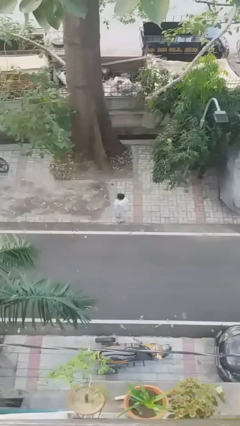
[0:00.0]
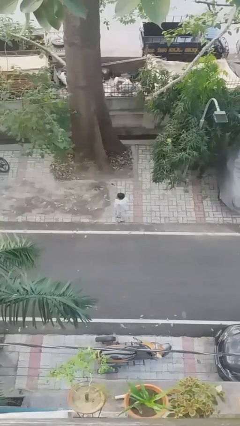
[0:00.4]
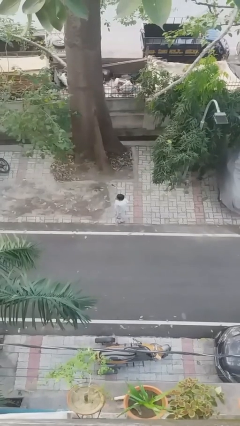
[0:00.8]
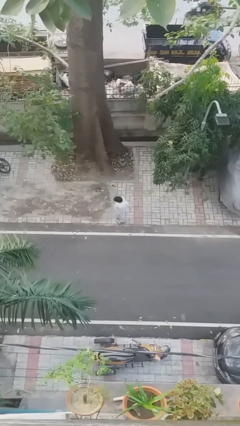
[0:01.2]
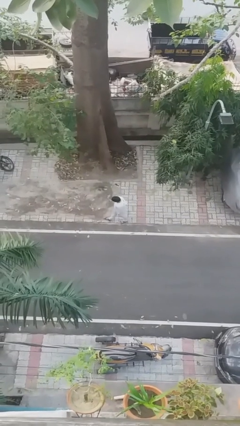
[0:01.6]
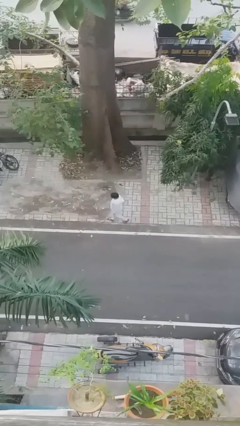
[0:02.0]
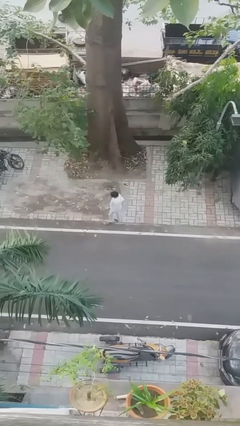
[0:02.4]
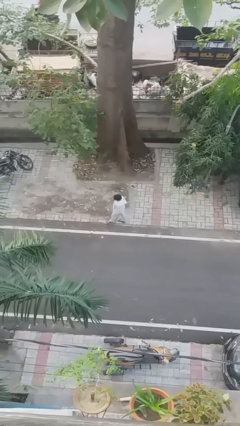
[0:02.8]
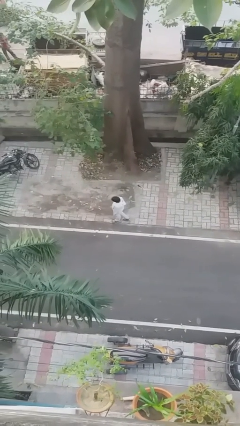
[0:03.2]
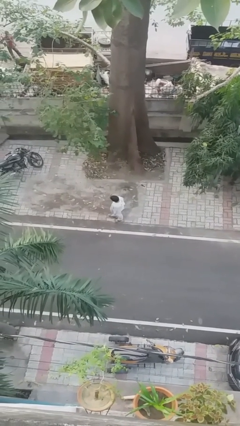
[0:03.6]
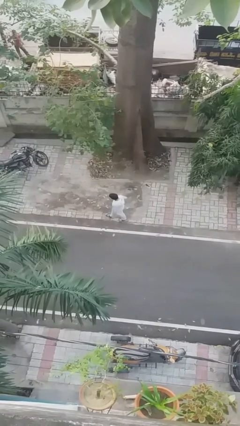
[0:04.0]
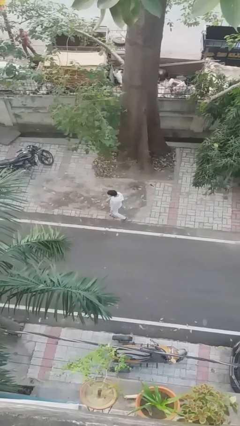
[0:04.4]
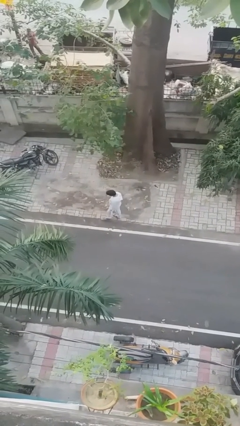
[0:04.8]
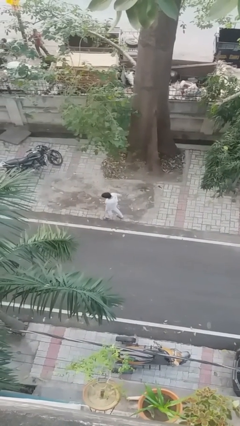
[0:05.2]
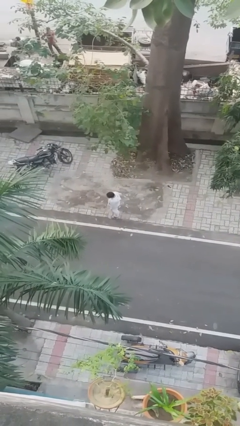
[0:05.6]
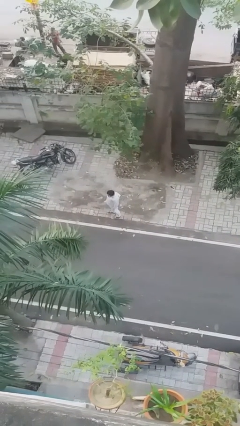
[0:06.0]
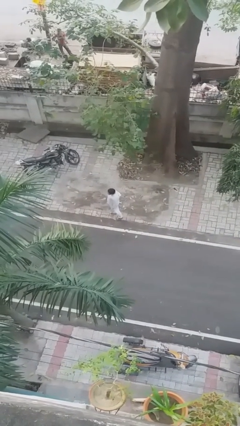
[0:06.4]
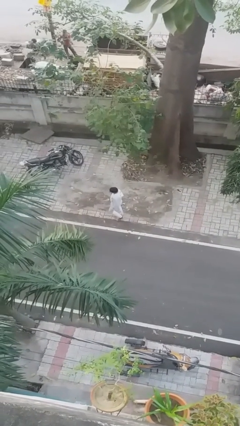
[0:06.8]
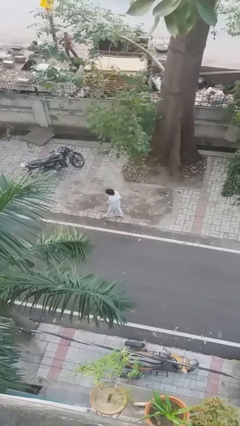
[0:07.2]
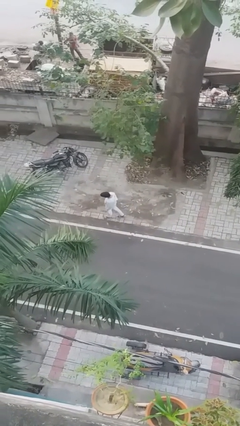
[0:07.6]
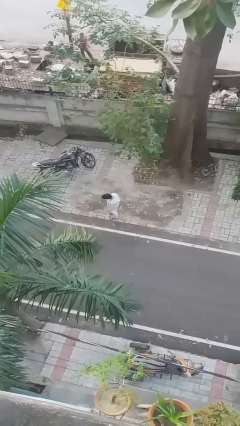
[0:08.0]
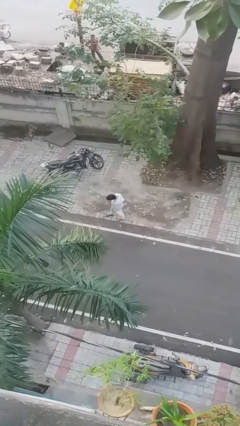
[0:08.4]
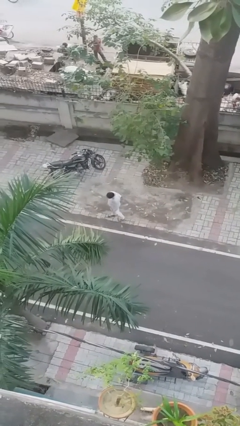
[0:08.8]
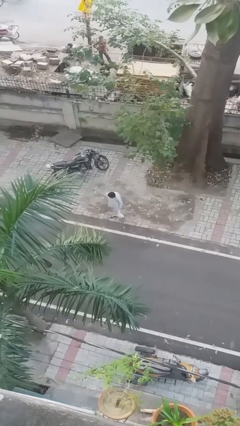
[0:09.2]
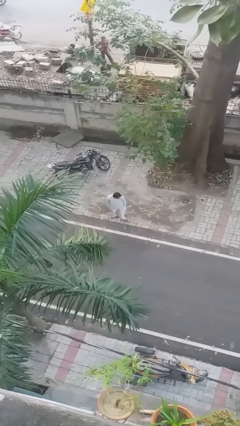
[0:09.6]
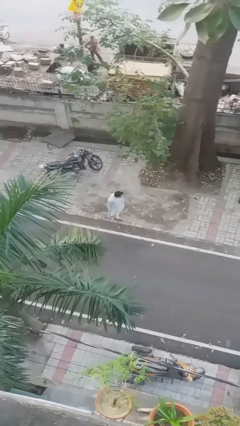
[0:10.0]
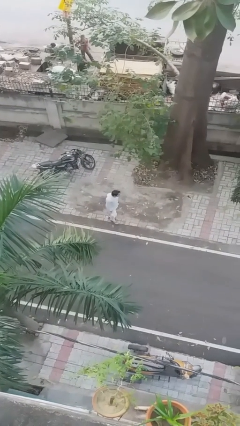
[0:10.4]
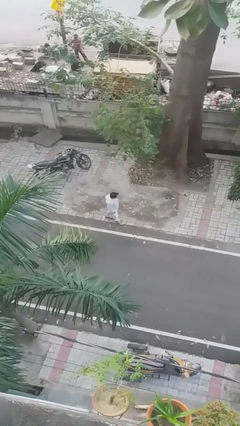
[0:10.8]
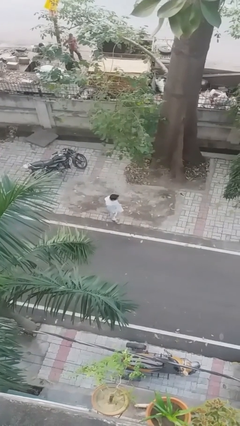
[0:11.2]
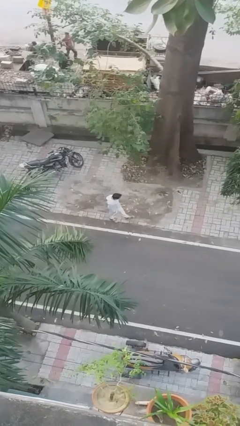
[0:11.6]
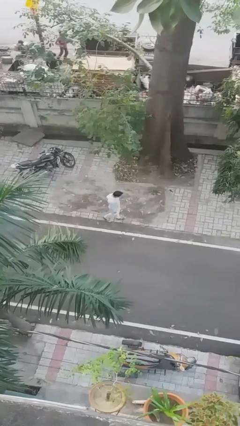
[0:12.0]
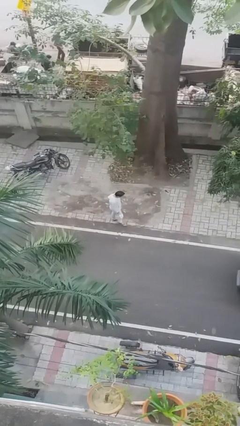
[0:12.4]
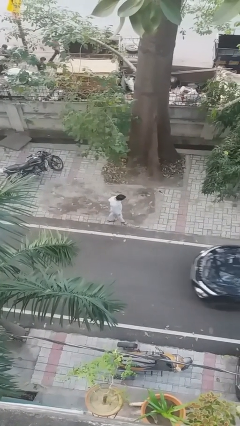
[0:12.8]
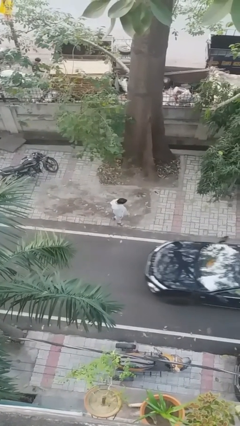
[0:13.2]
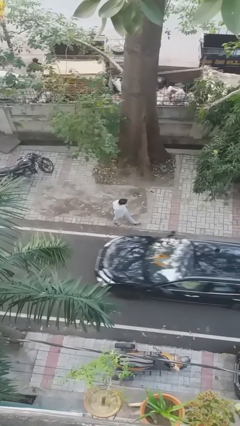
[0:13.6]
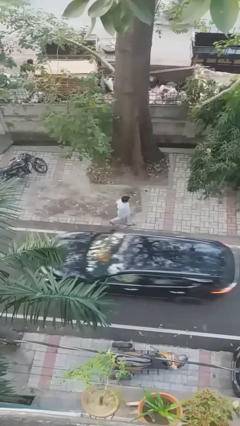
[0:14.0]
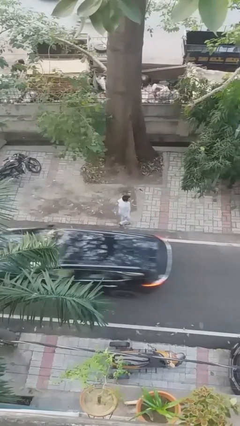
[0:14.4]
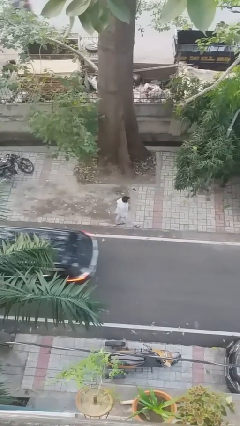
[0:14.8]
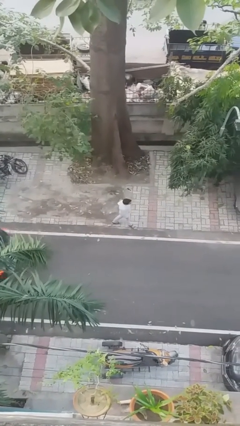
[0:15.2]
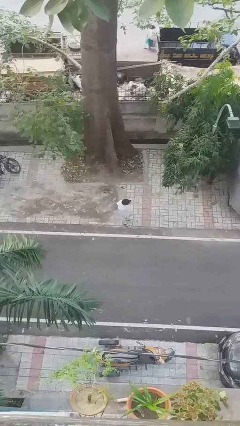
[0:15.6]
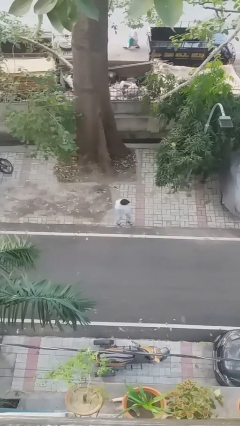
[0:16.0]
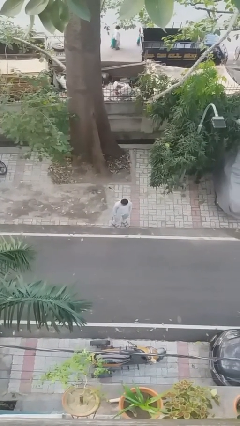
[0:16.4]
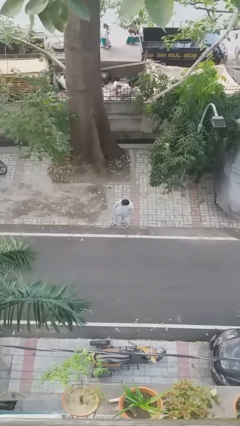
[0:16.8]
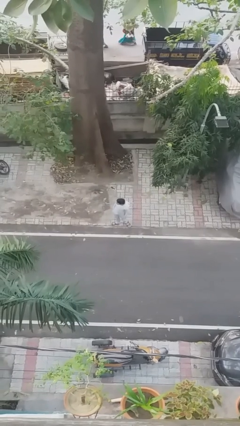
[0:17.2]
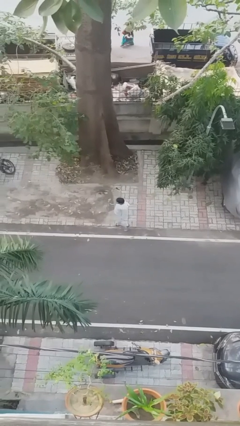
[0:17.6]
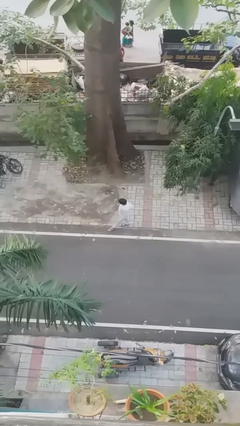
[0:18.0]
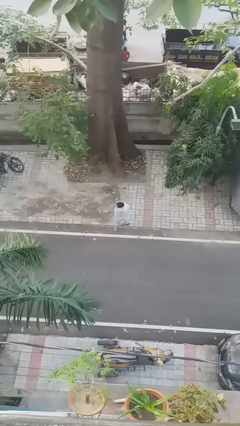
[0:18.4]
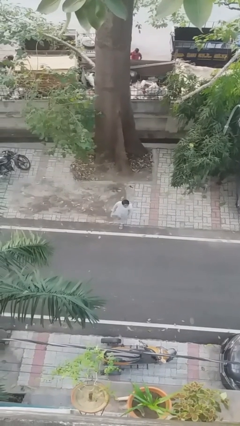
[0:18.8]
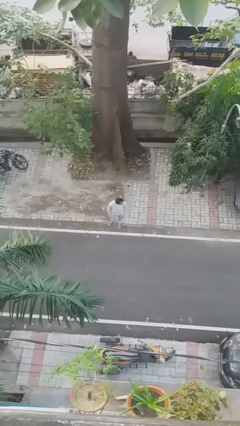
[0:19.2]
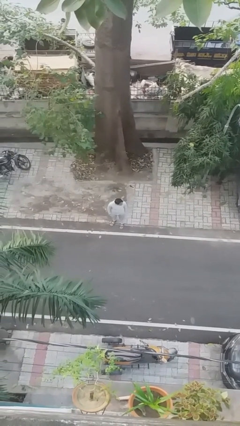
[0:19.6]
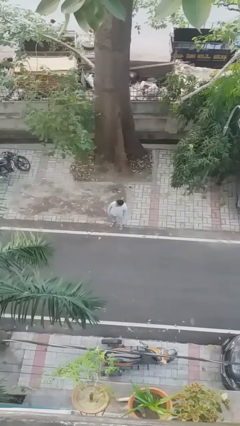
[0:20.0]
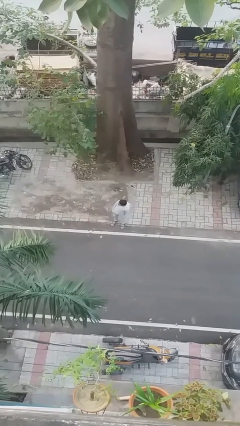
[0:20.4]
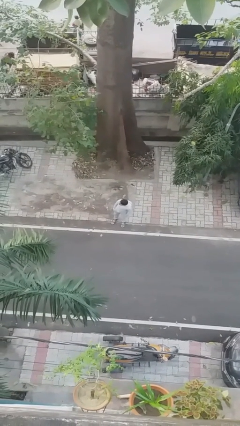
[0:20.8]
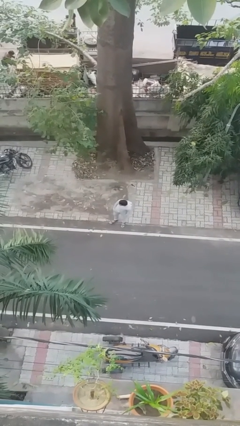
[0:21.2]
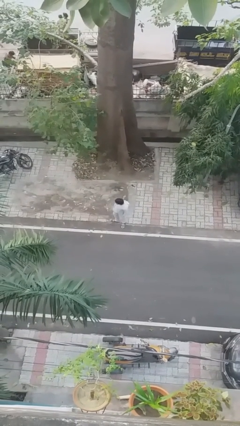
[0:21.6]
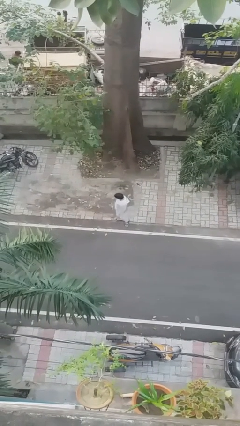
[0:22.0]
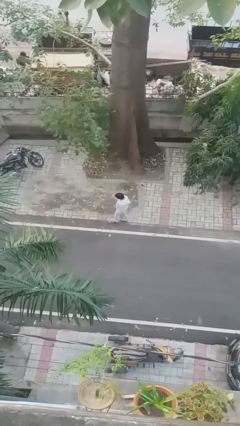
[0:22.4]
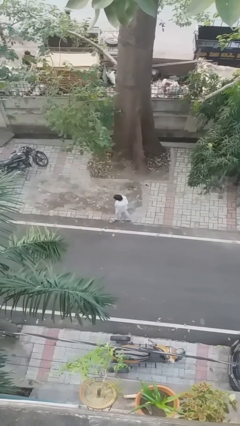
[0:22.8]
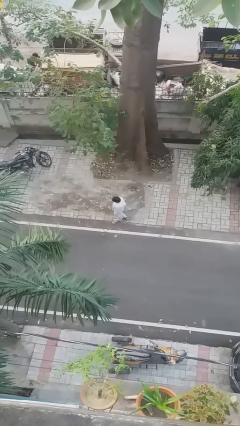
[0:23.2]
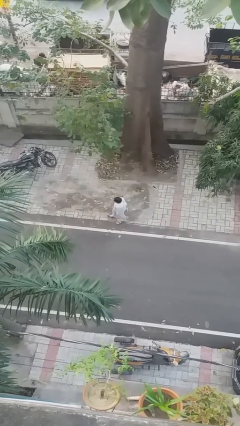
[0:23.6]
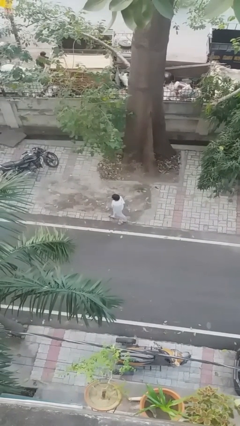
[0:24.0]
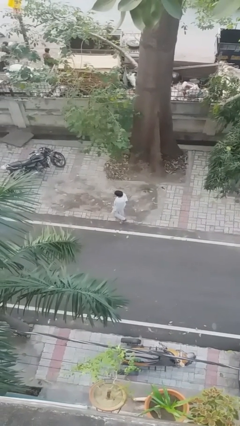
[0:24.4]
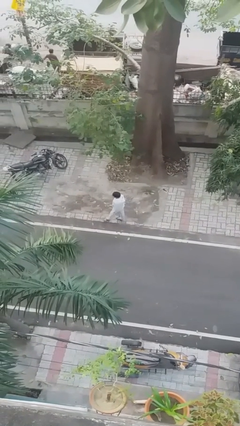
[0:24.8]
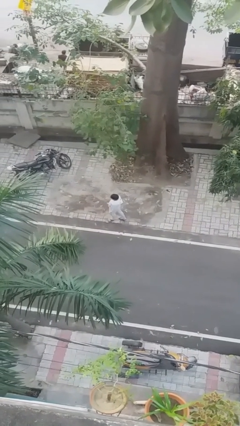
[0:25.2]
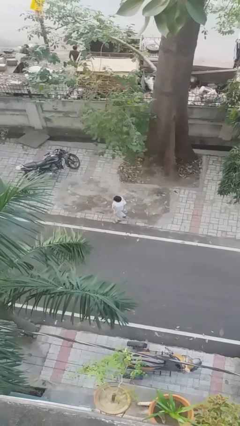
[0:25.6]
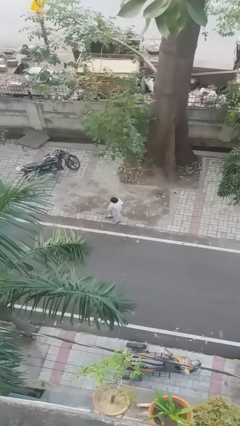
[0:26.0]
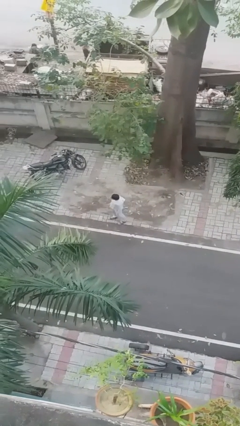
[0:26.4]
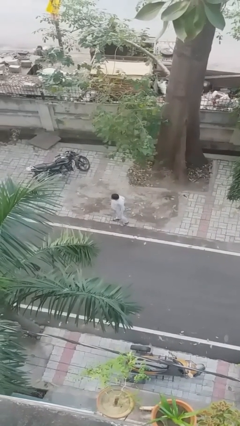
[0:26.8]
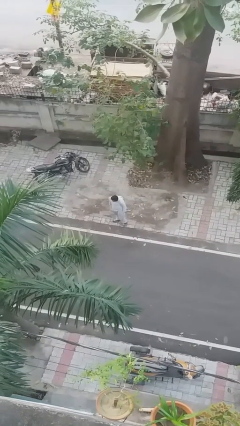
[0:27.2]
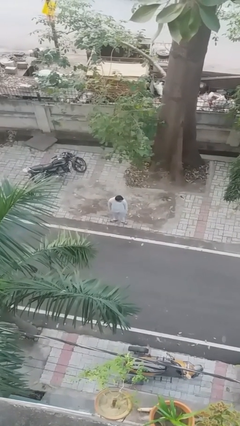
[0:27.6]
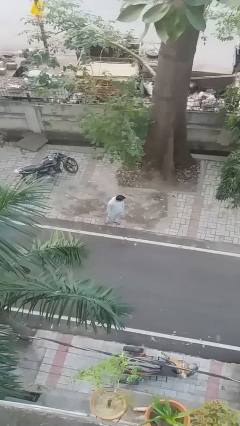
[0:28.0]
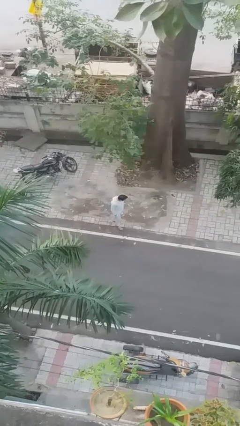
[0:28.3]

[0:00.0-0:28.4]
person walks

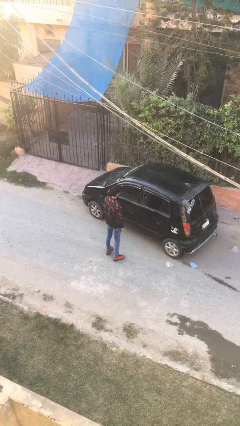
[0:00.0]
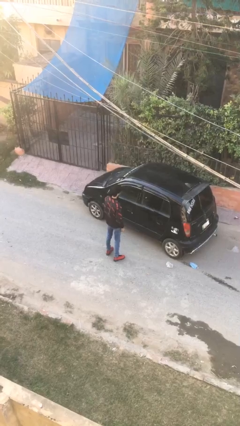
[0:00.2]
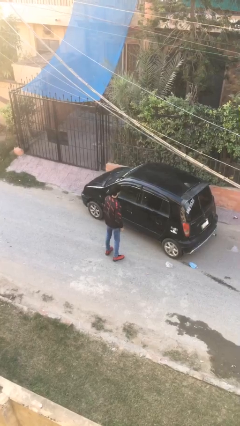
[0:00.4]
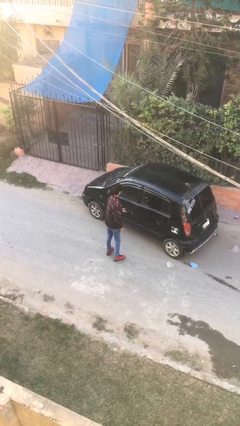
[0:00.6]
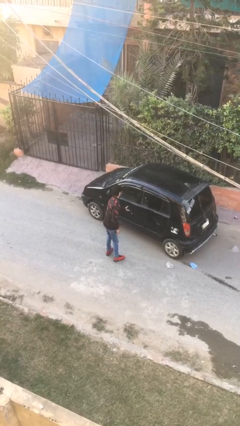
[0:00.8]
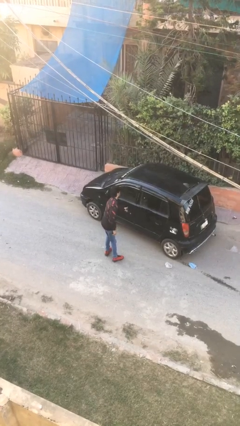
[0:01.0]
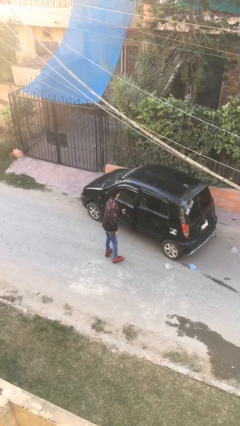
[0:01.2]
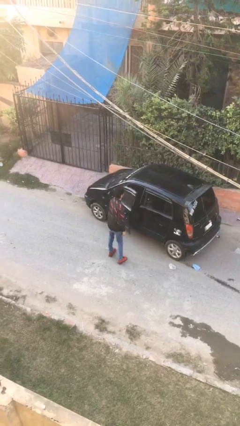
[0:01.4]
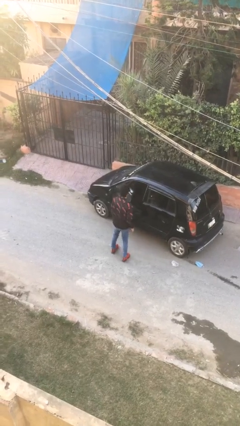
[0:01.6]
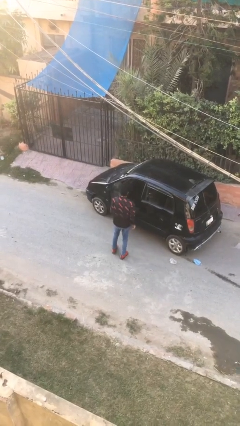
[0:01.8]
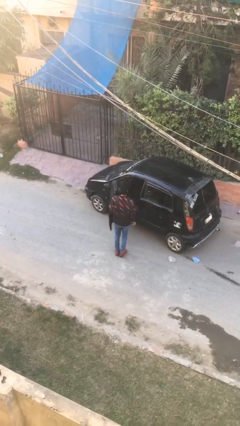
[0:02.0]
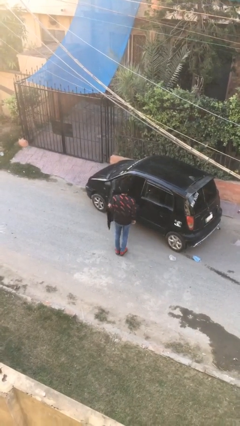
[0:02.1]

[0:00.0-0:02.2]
person opens car door

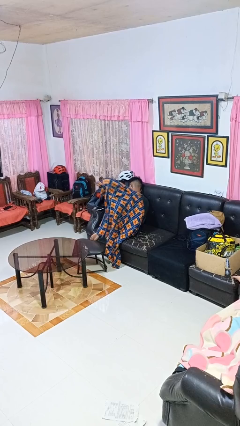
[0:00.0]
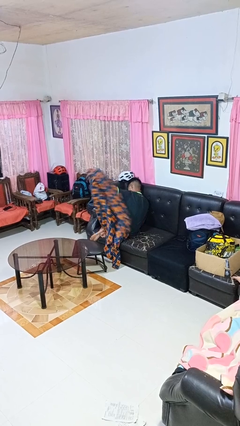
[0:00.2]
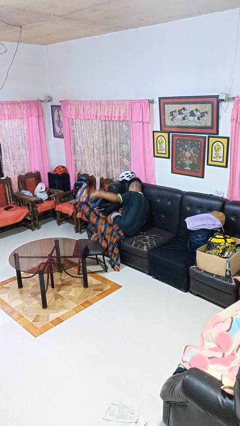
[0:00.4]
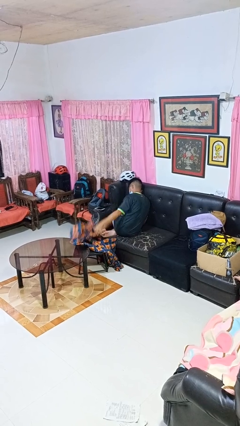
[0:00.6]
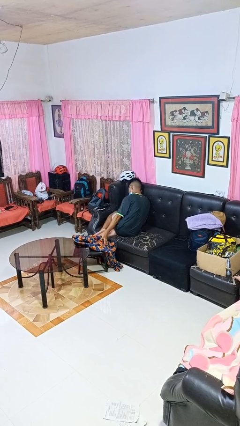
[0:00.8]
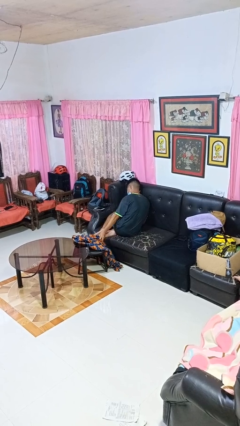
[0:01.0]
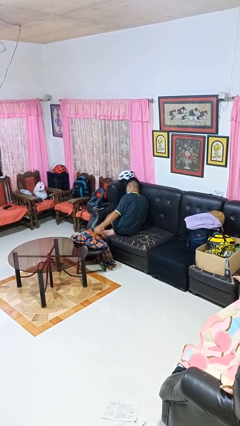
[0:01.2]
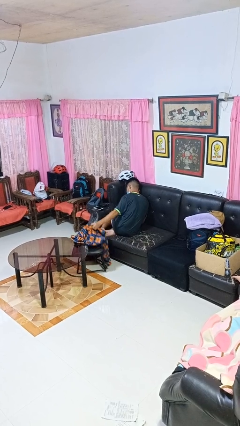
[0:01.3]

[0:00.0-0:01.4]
person uncovers with blanket

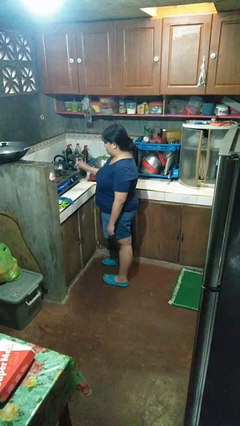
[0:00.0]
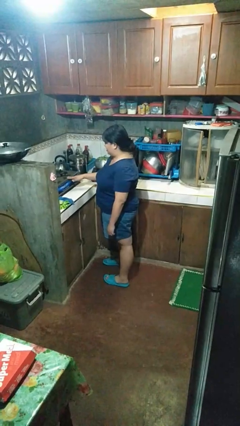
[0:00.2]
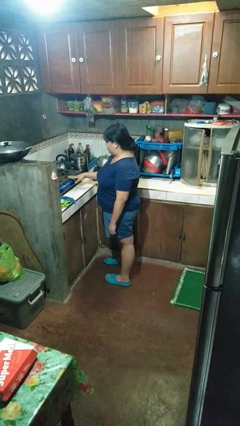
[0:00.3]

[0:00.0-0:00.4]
person burns hand

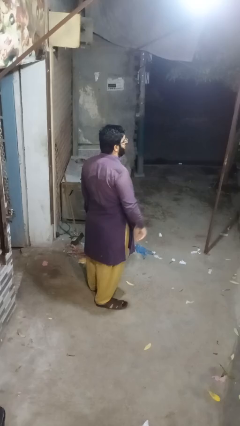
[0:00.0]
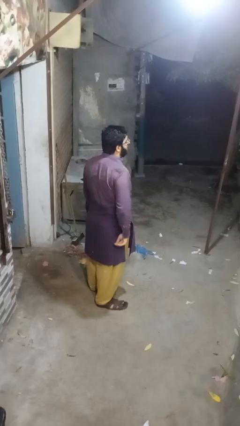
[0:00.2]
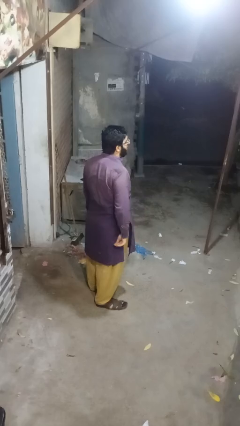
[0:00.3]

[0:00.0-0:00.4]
person gestures lower hand
